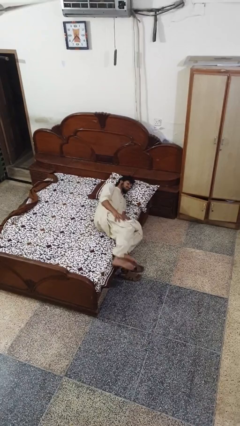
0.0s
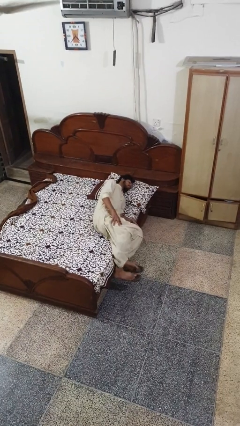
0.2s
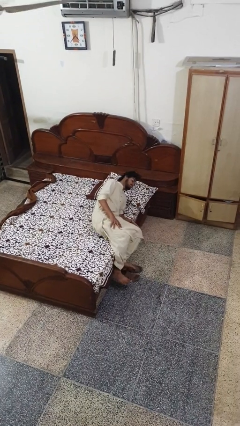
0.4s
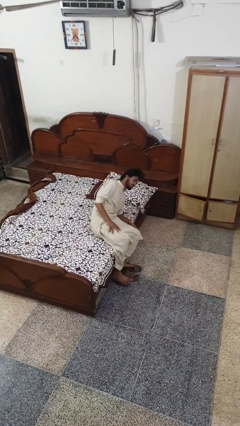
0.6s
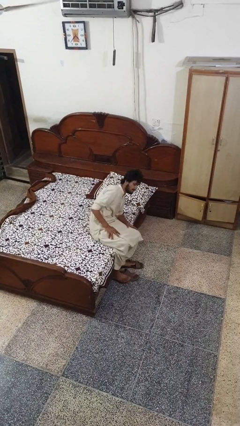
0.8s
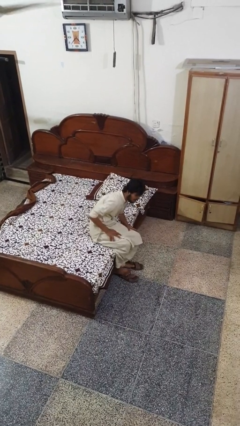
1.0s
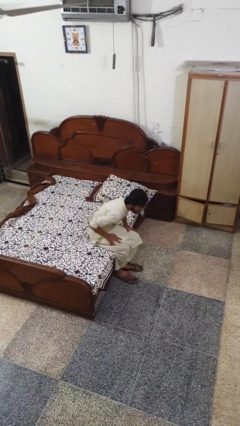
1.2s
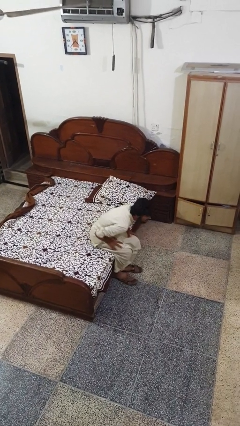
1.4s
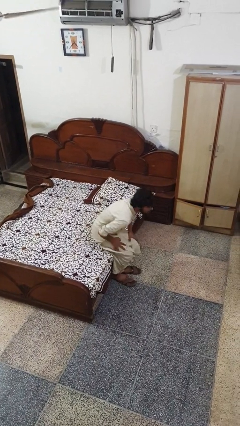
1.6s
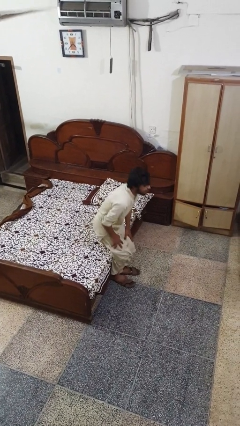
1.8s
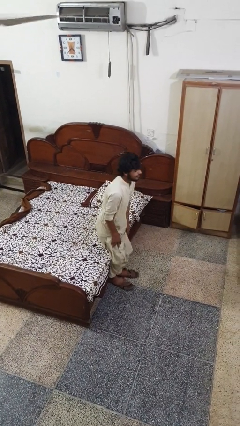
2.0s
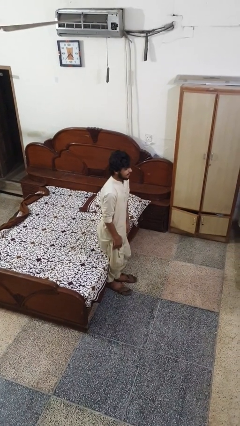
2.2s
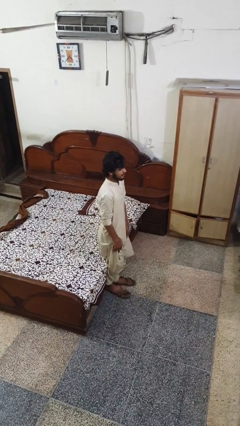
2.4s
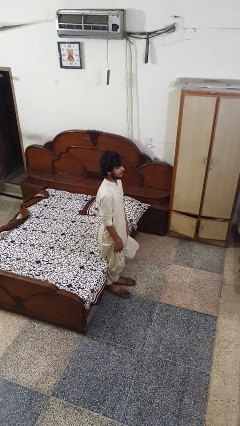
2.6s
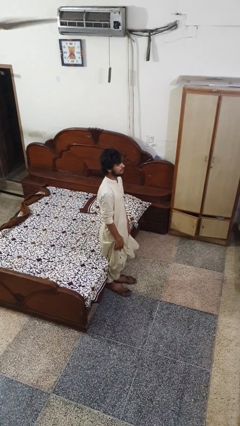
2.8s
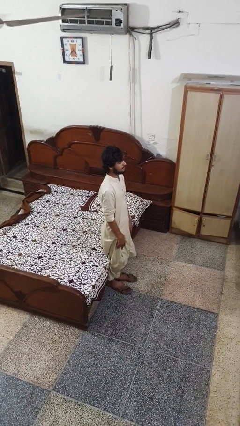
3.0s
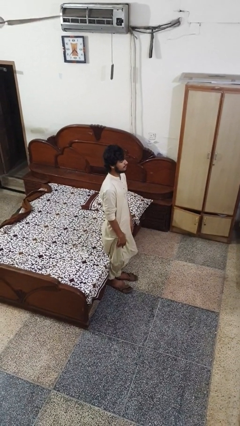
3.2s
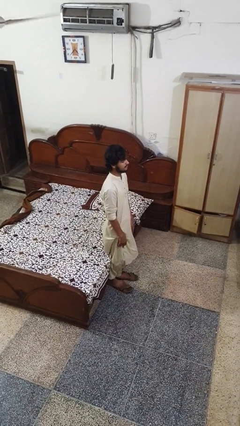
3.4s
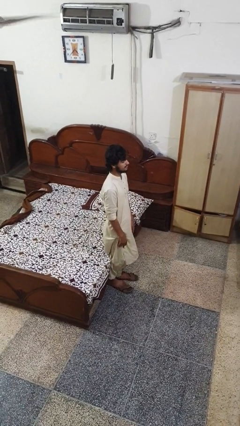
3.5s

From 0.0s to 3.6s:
person stands up

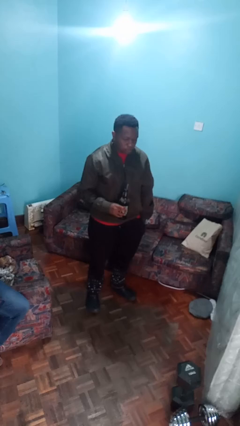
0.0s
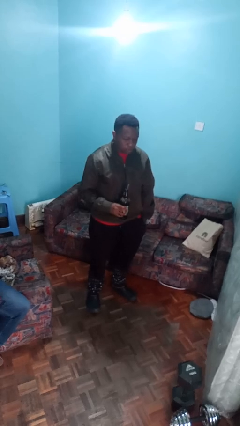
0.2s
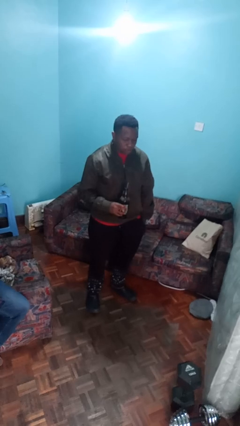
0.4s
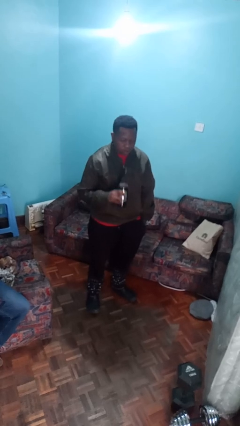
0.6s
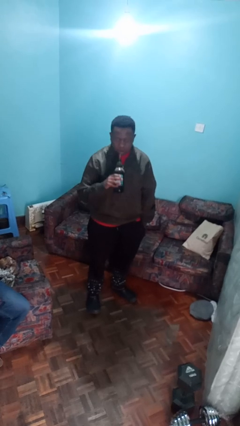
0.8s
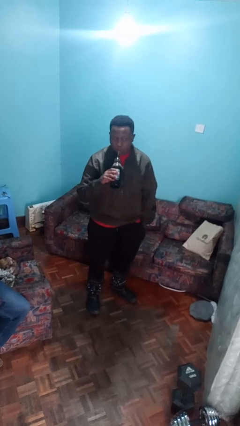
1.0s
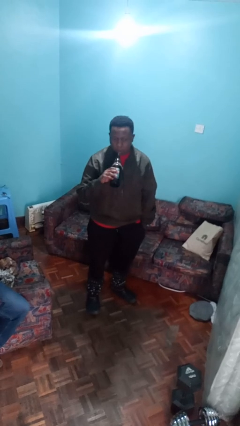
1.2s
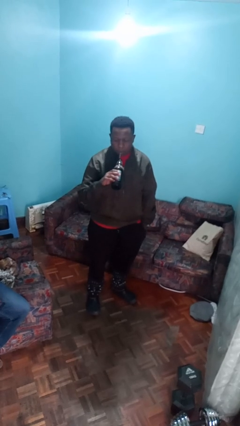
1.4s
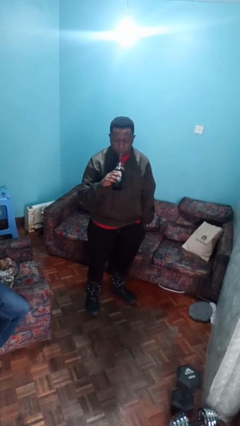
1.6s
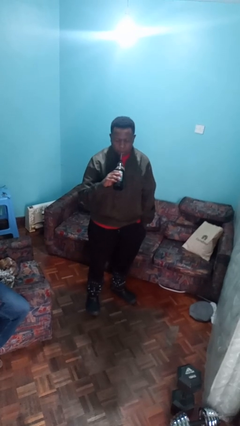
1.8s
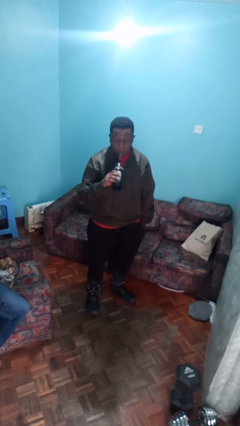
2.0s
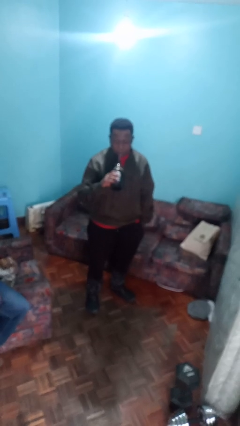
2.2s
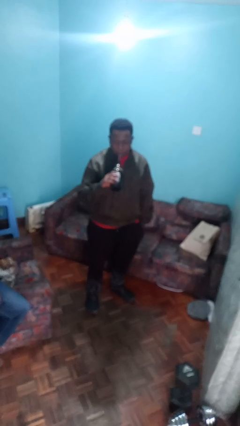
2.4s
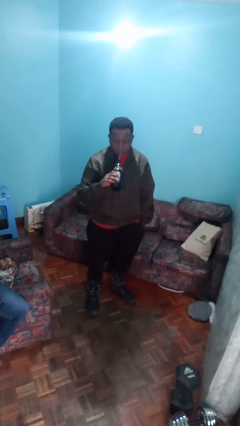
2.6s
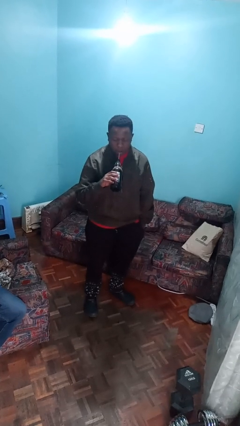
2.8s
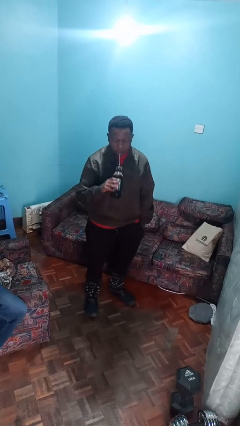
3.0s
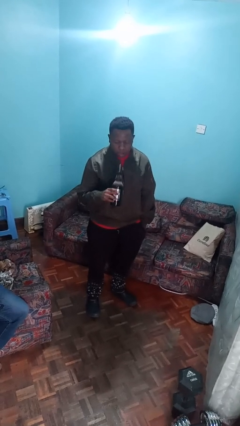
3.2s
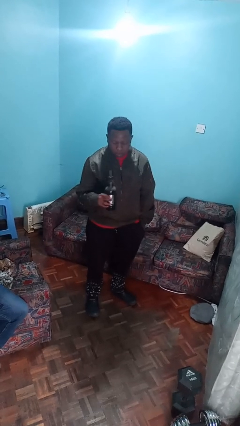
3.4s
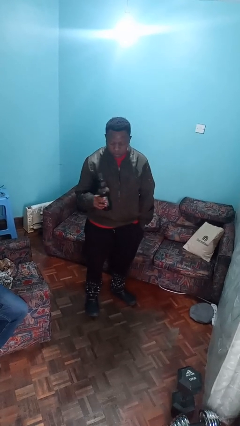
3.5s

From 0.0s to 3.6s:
person drinks from straw

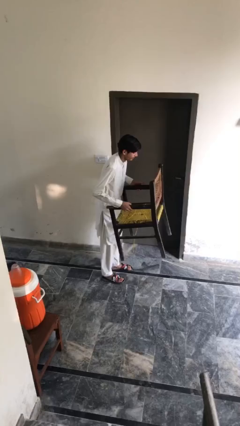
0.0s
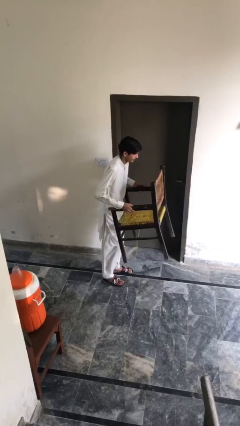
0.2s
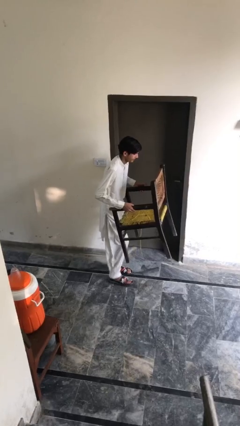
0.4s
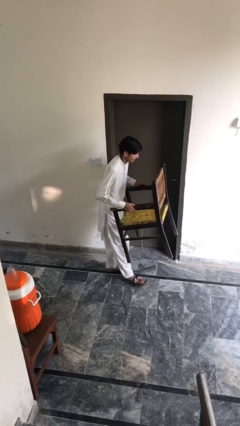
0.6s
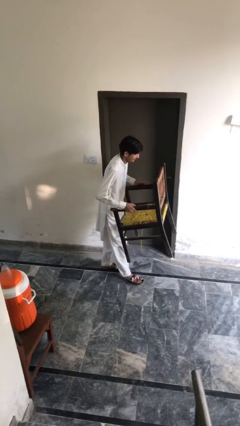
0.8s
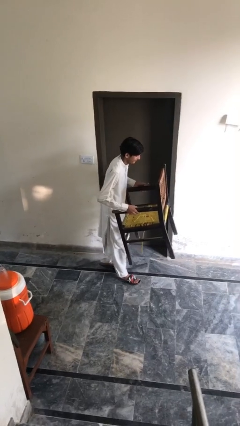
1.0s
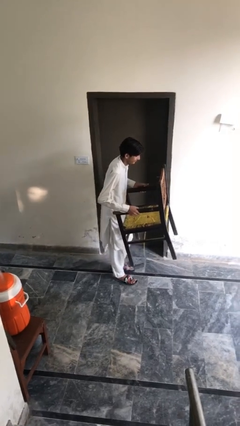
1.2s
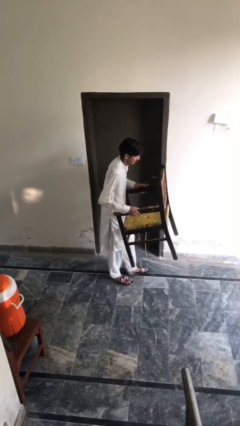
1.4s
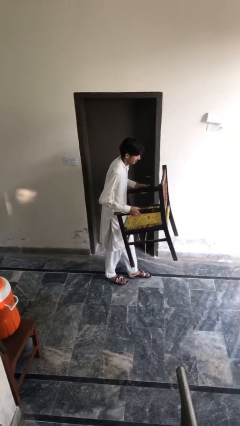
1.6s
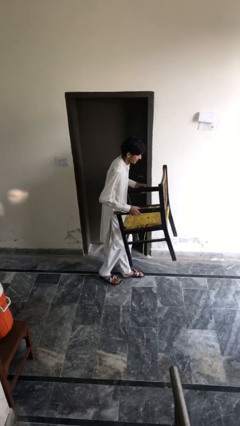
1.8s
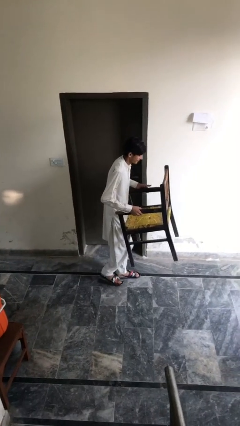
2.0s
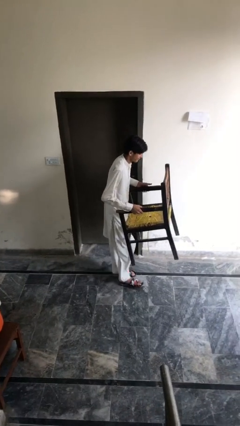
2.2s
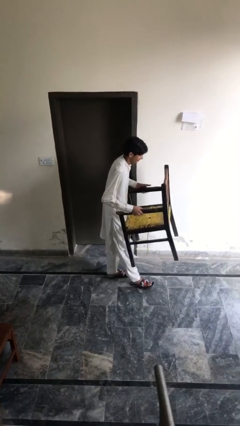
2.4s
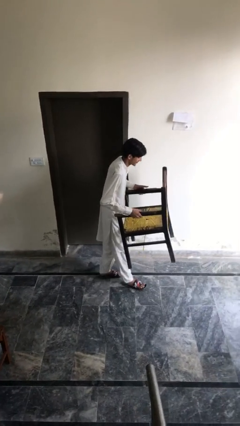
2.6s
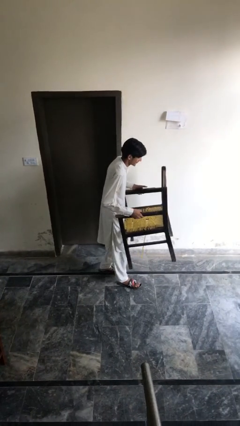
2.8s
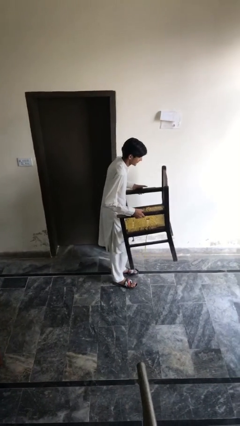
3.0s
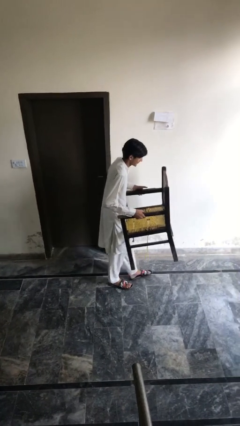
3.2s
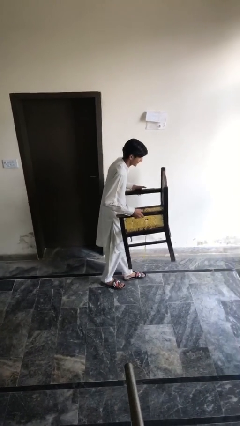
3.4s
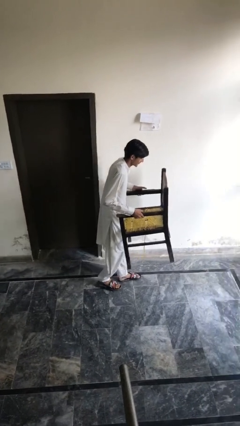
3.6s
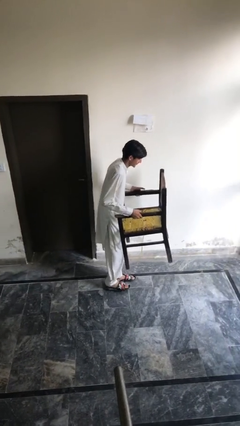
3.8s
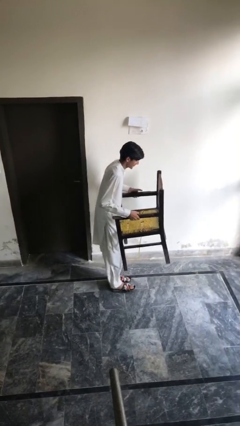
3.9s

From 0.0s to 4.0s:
person carries heavy object

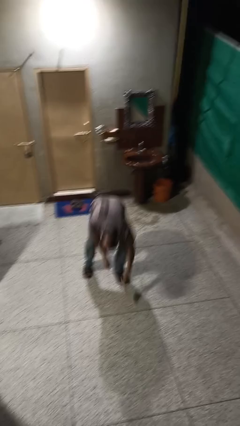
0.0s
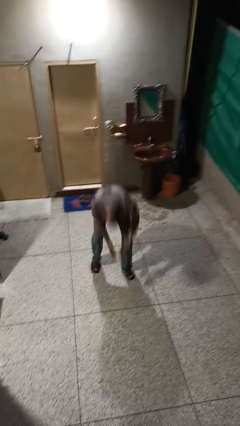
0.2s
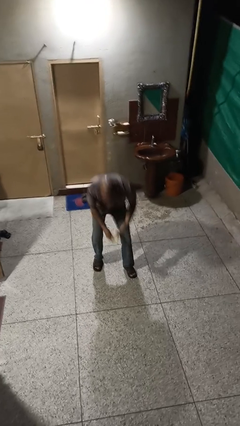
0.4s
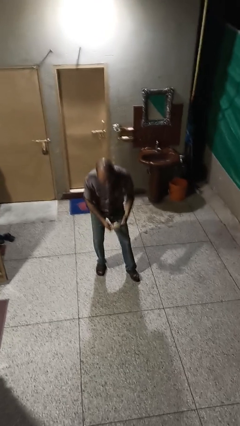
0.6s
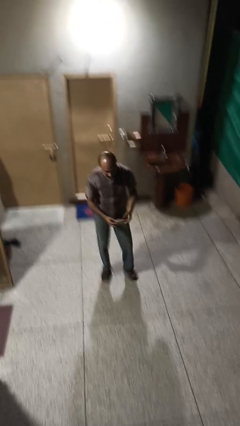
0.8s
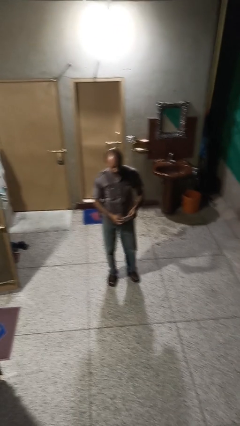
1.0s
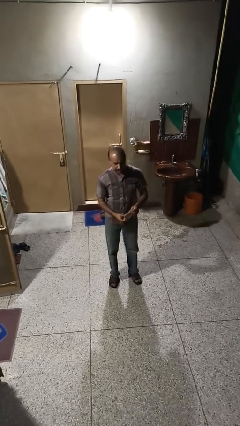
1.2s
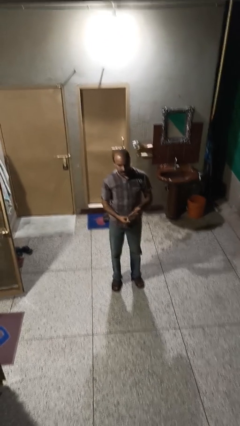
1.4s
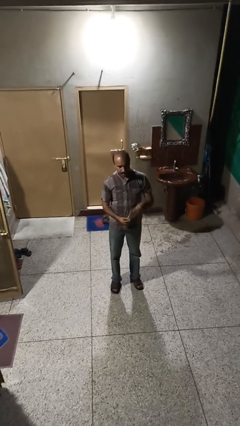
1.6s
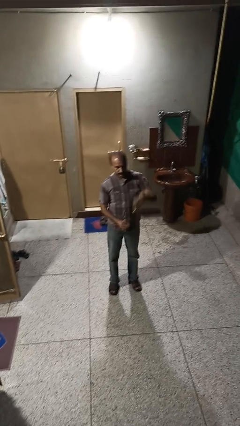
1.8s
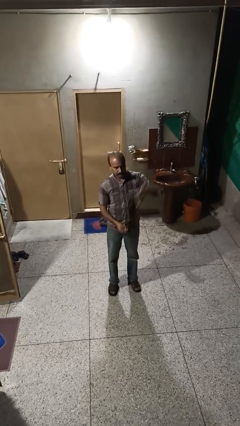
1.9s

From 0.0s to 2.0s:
person picks up object from floor

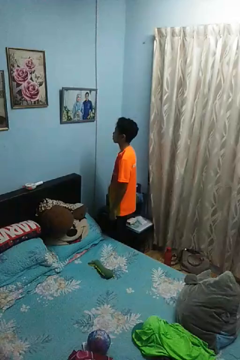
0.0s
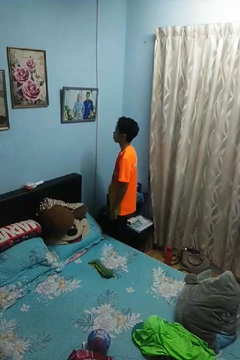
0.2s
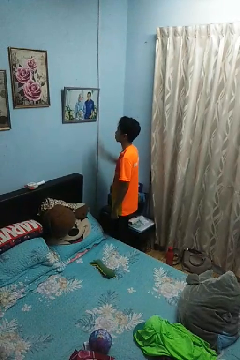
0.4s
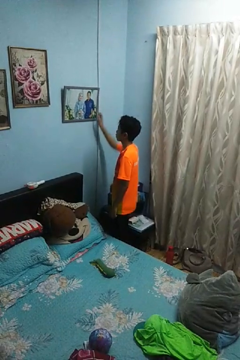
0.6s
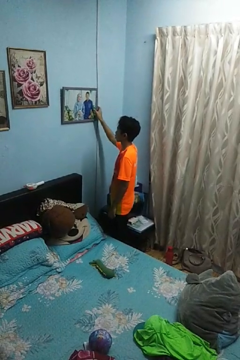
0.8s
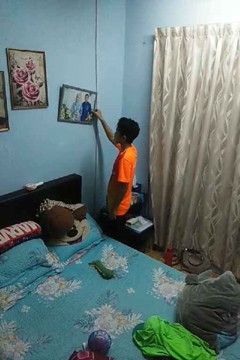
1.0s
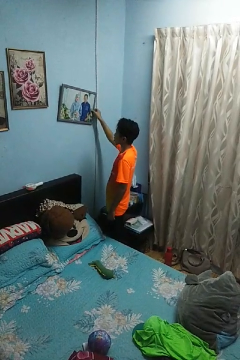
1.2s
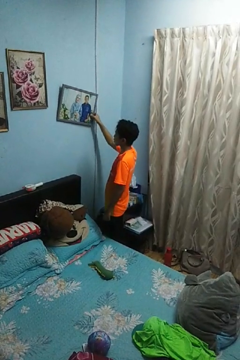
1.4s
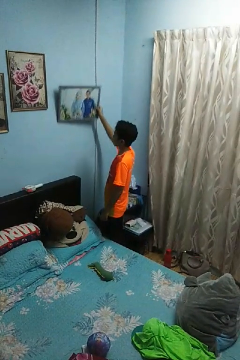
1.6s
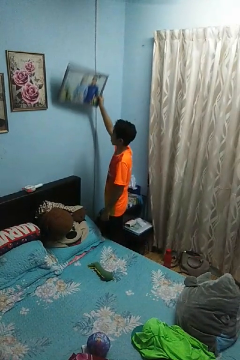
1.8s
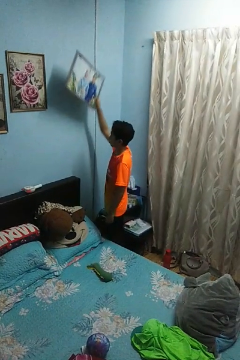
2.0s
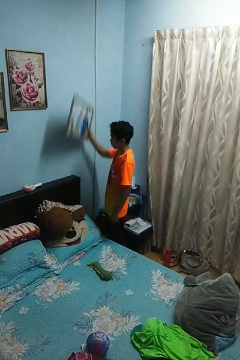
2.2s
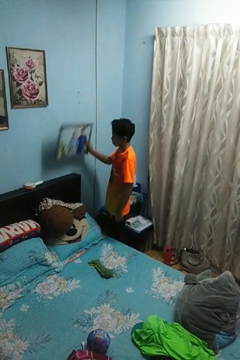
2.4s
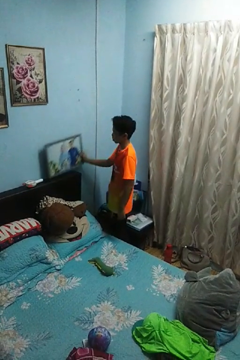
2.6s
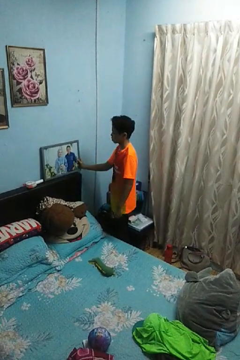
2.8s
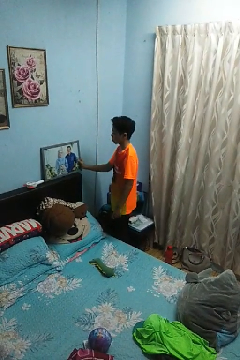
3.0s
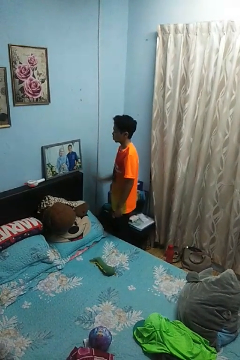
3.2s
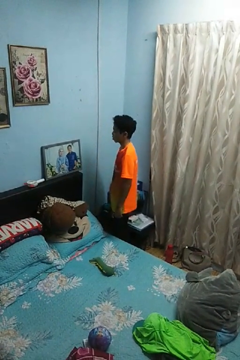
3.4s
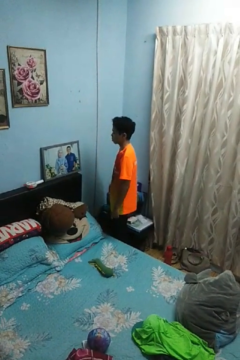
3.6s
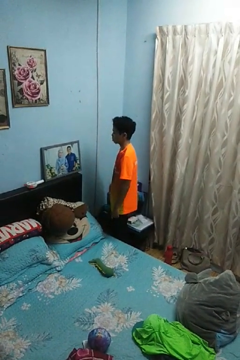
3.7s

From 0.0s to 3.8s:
person takes down picture frame

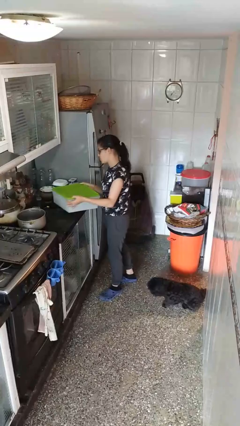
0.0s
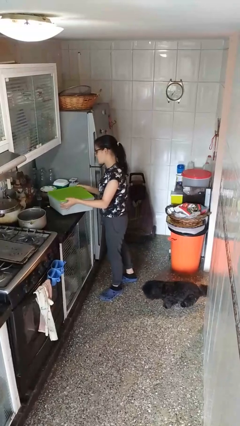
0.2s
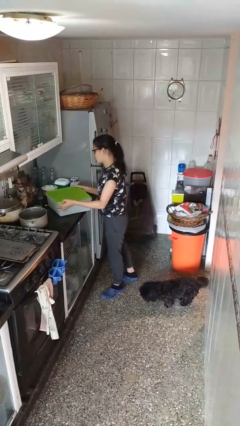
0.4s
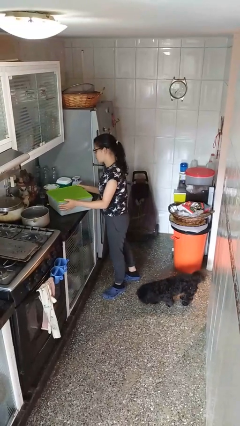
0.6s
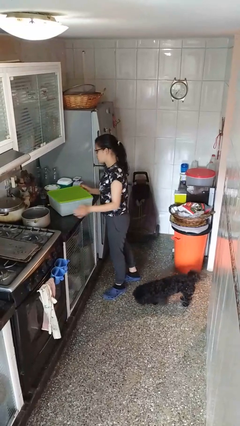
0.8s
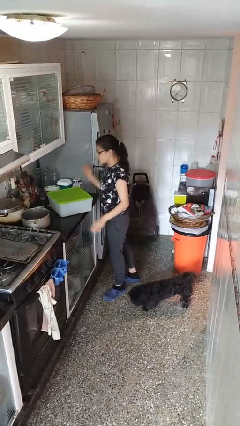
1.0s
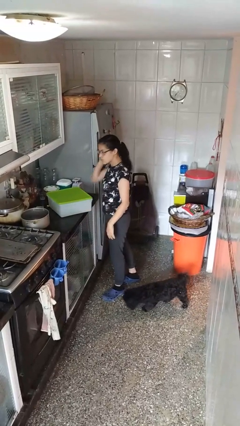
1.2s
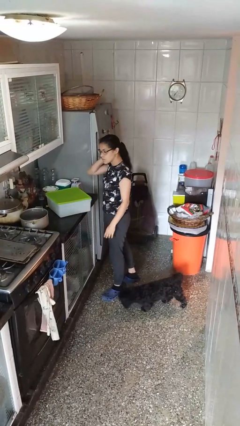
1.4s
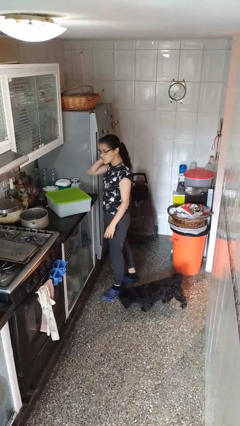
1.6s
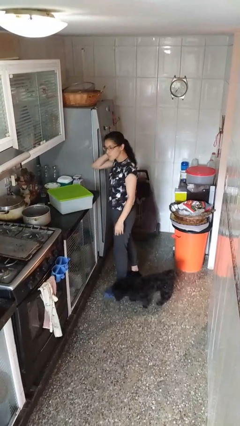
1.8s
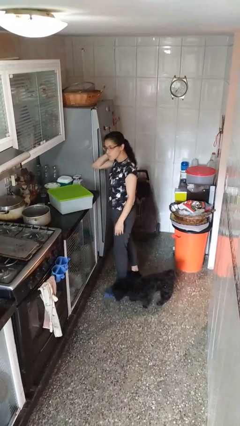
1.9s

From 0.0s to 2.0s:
person puts down object on countertop
